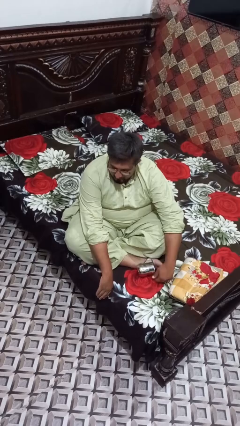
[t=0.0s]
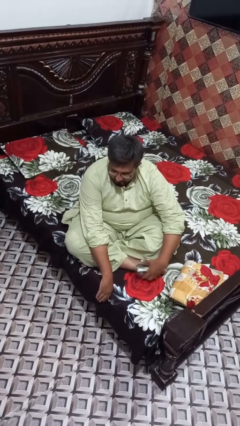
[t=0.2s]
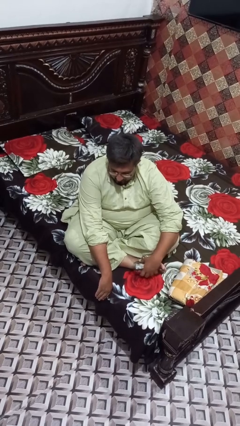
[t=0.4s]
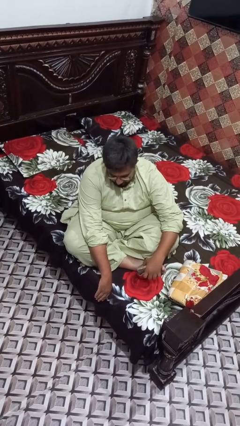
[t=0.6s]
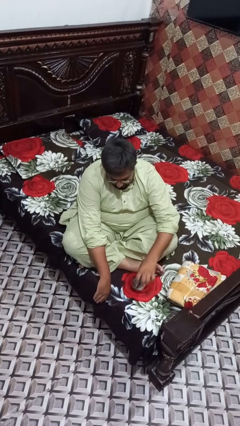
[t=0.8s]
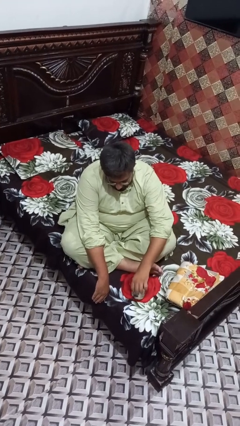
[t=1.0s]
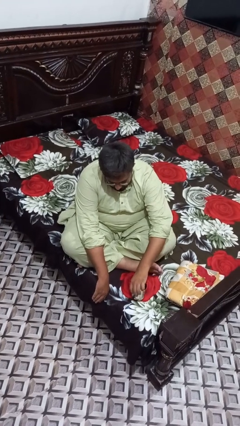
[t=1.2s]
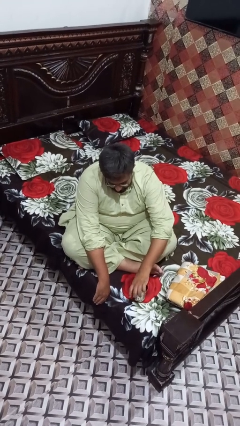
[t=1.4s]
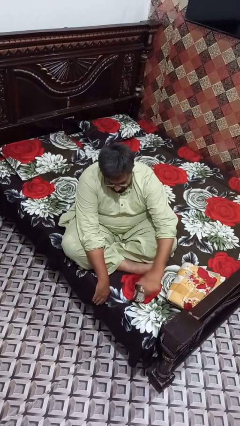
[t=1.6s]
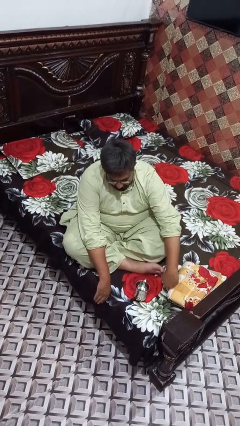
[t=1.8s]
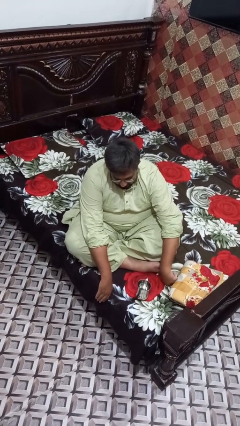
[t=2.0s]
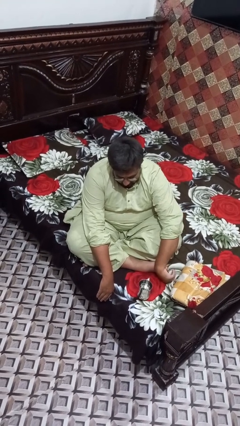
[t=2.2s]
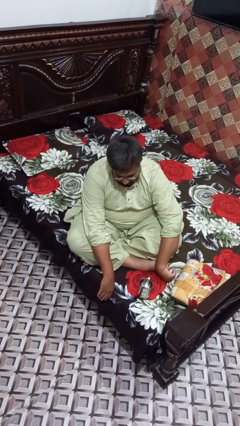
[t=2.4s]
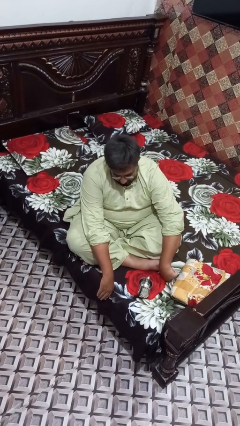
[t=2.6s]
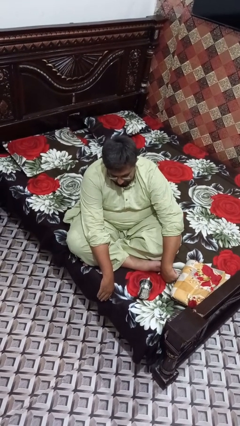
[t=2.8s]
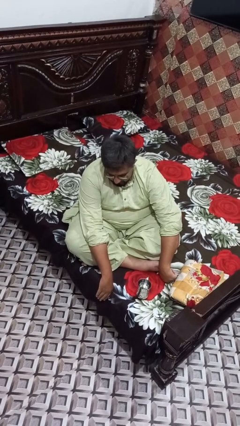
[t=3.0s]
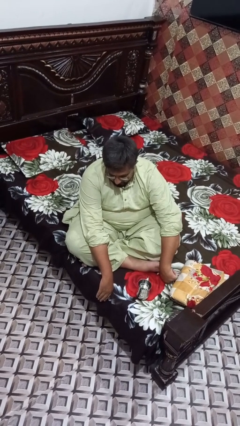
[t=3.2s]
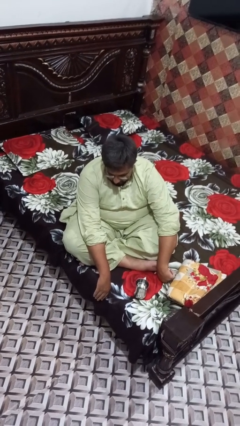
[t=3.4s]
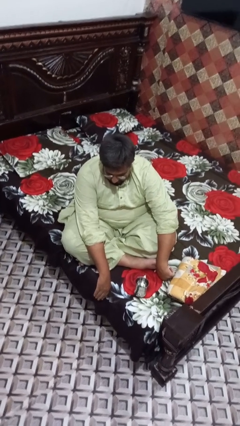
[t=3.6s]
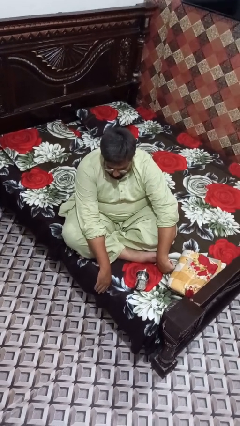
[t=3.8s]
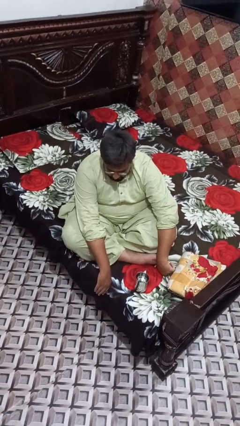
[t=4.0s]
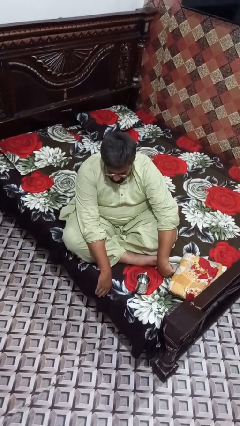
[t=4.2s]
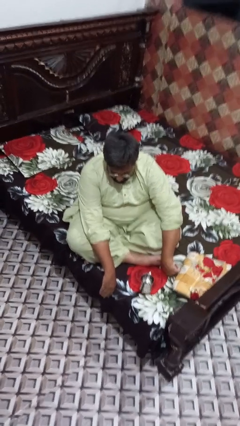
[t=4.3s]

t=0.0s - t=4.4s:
person sets upright glass

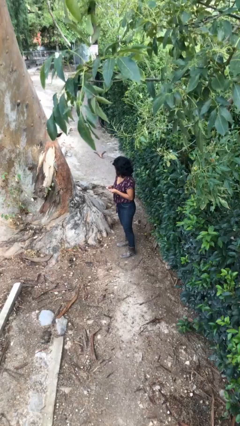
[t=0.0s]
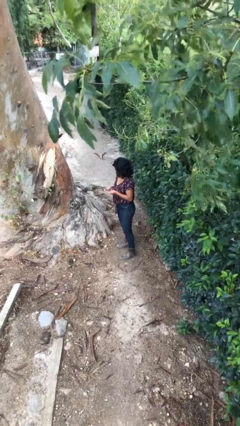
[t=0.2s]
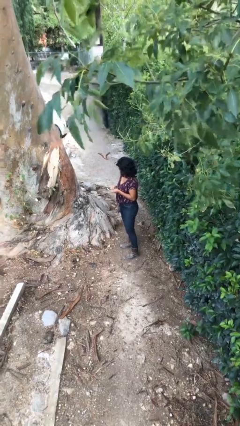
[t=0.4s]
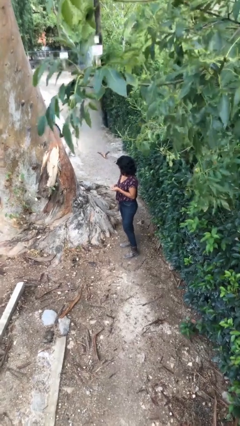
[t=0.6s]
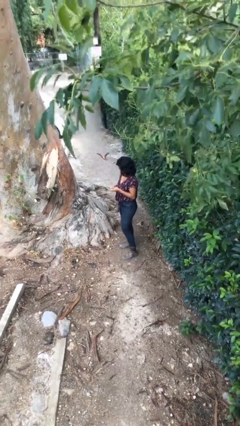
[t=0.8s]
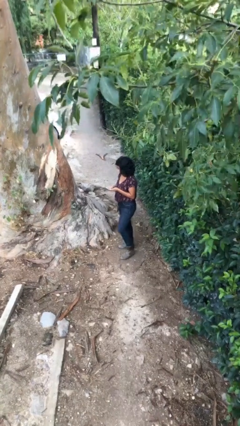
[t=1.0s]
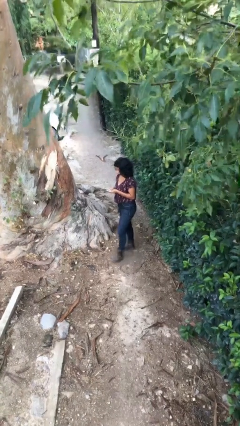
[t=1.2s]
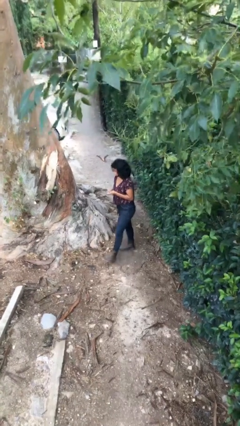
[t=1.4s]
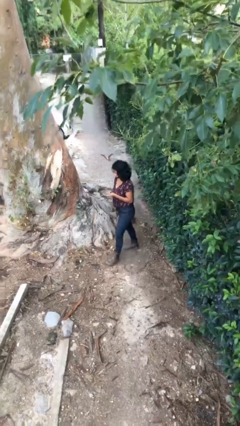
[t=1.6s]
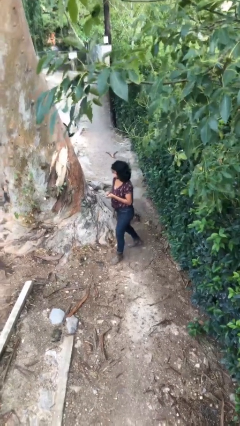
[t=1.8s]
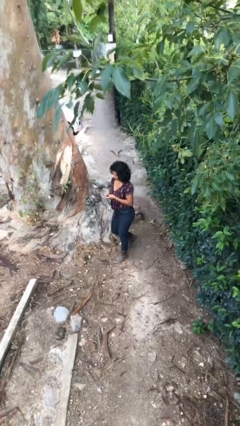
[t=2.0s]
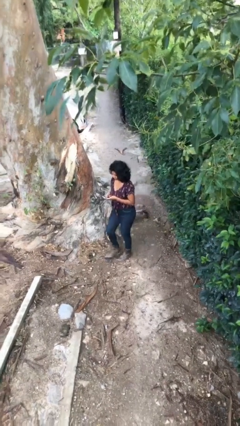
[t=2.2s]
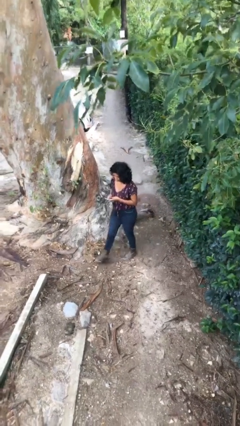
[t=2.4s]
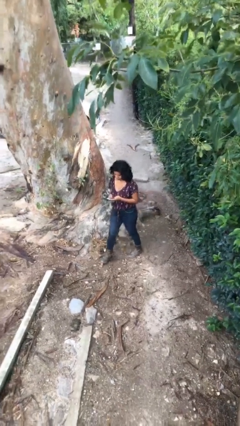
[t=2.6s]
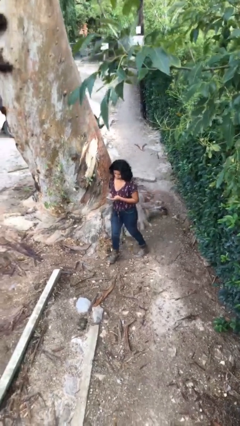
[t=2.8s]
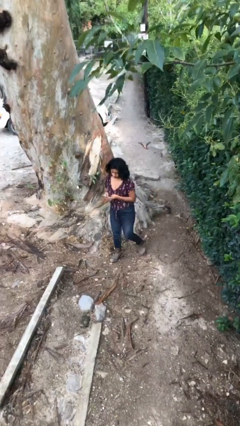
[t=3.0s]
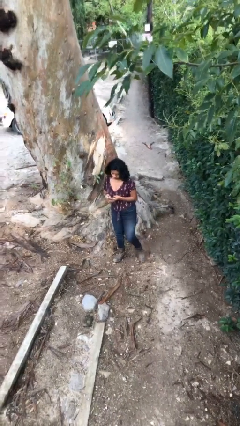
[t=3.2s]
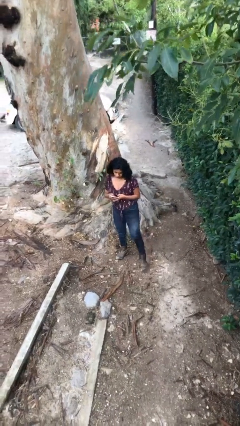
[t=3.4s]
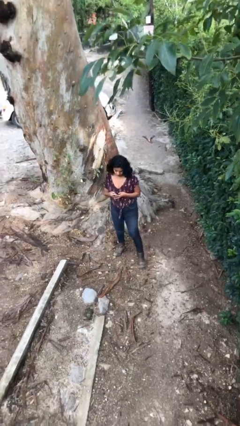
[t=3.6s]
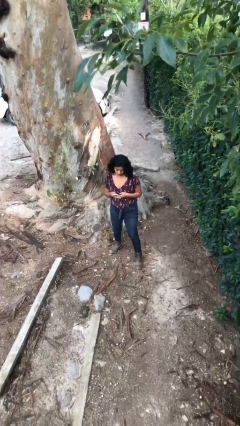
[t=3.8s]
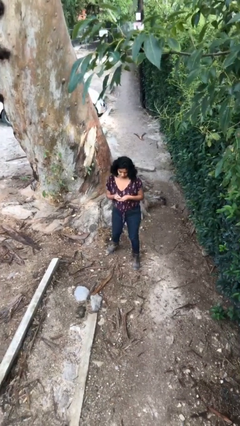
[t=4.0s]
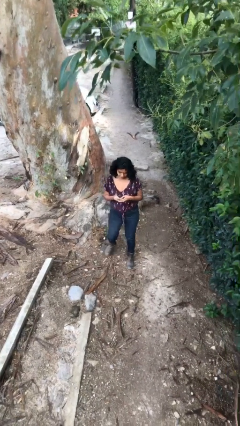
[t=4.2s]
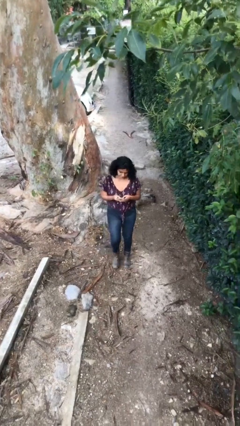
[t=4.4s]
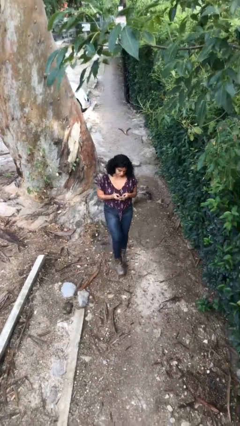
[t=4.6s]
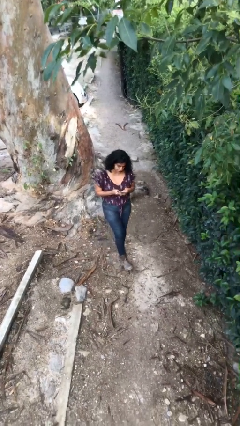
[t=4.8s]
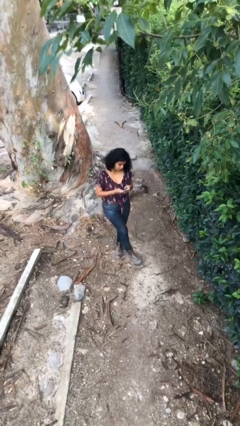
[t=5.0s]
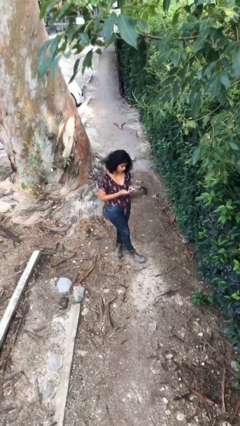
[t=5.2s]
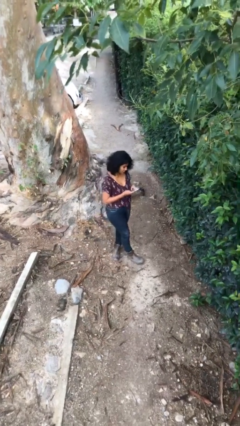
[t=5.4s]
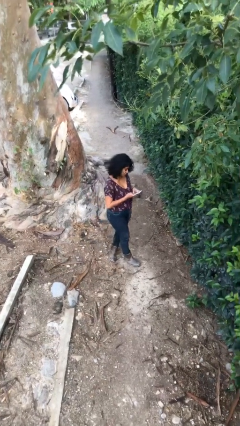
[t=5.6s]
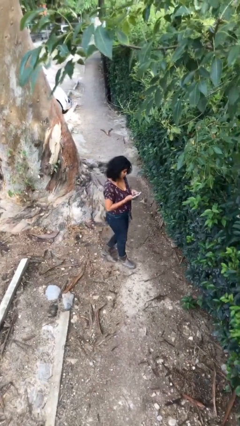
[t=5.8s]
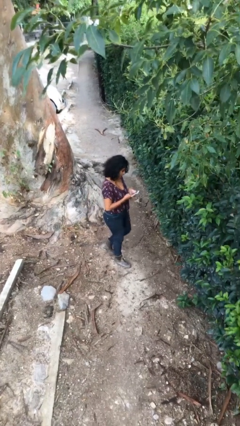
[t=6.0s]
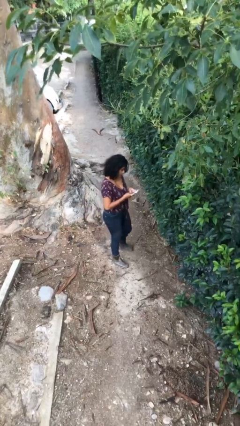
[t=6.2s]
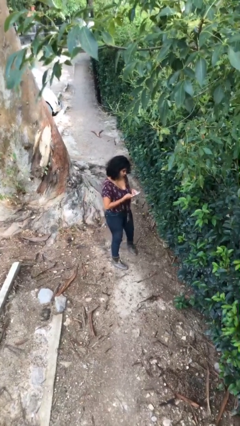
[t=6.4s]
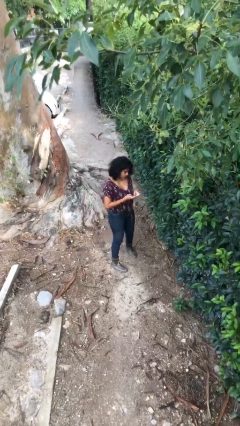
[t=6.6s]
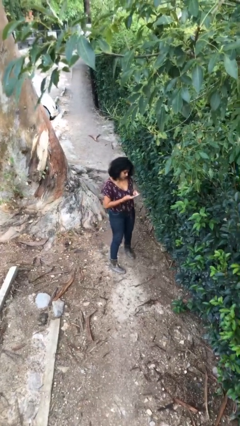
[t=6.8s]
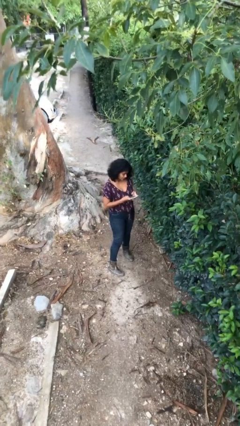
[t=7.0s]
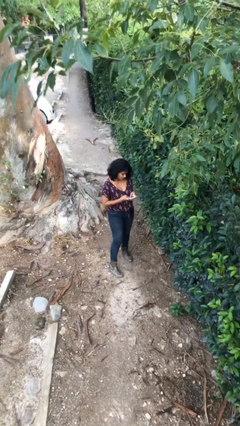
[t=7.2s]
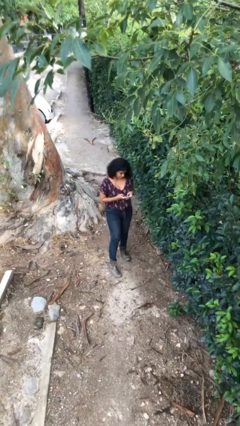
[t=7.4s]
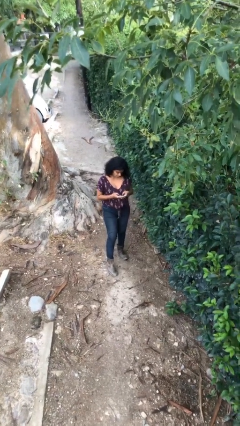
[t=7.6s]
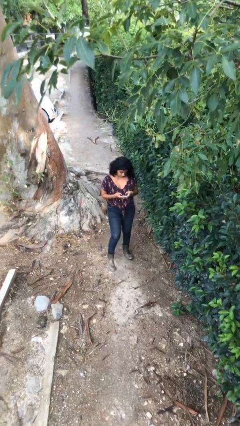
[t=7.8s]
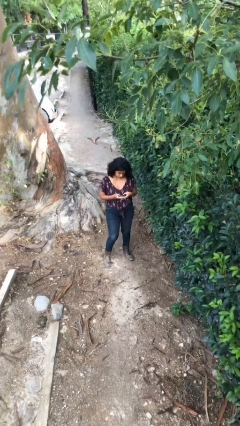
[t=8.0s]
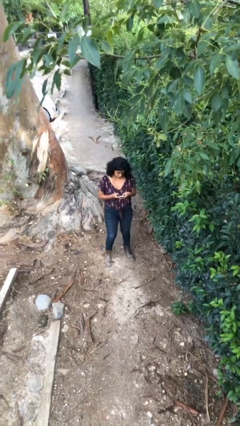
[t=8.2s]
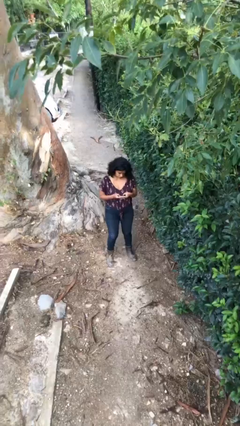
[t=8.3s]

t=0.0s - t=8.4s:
person texts on phone

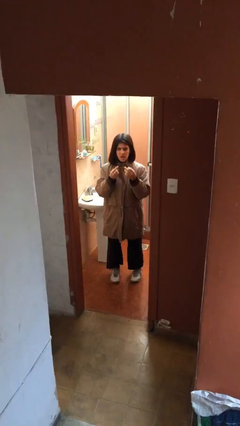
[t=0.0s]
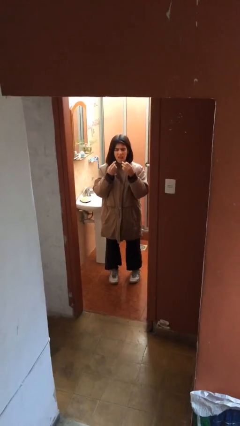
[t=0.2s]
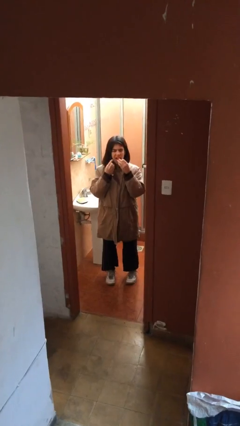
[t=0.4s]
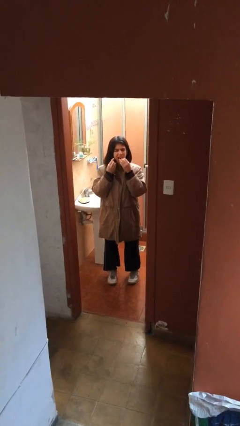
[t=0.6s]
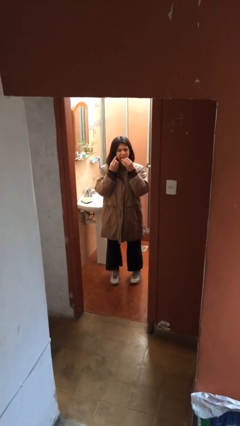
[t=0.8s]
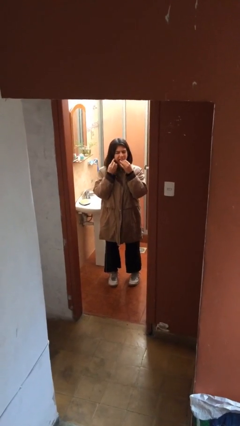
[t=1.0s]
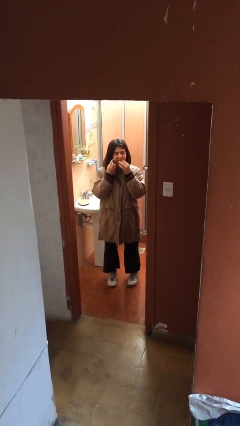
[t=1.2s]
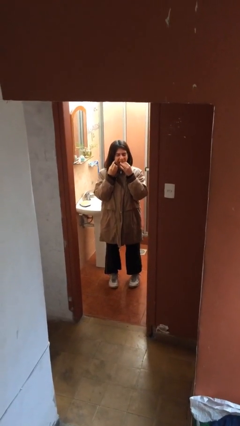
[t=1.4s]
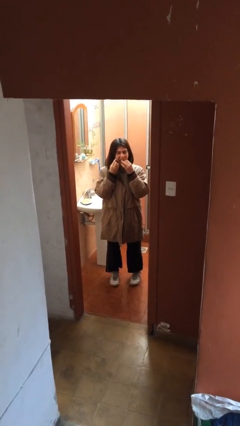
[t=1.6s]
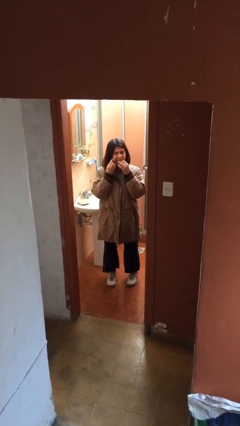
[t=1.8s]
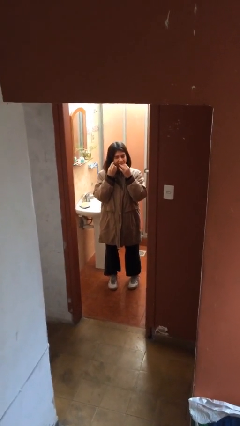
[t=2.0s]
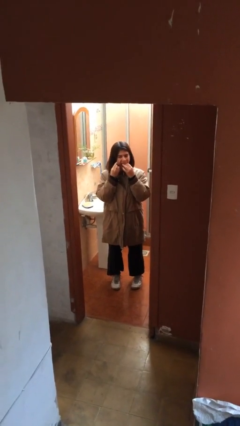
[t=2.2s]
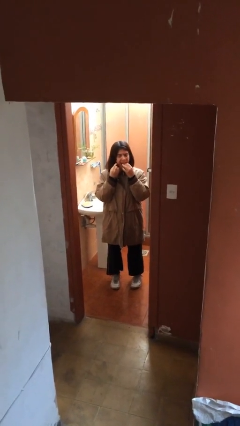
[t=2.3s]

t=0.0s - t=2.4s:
person flosses

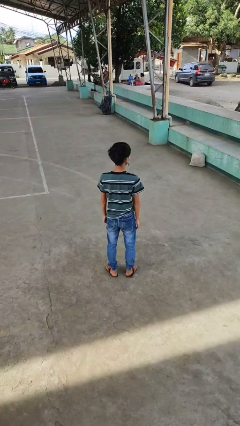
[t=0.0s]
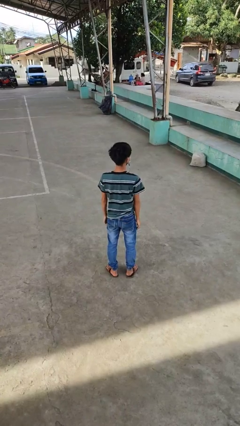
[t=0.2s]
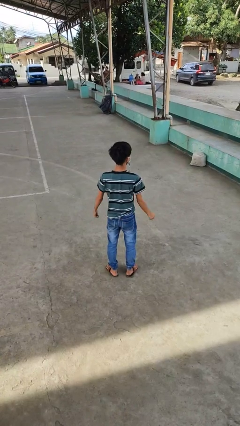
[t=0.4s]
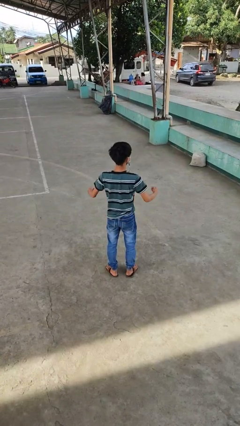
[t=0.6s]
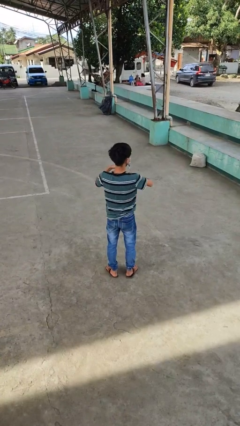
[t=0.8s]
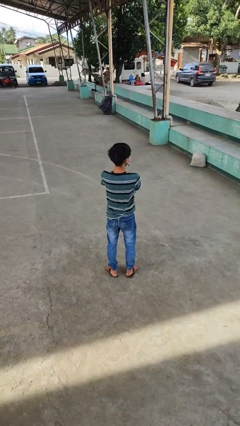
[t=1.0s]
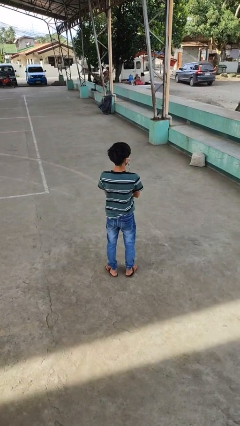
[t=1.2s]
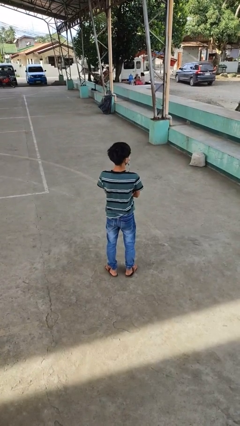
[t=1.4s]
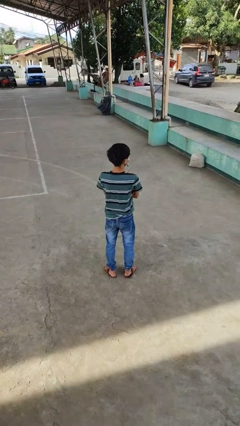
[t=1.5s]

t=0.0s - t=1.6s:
person crosses arms

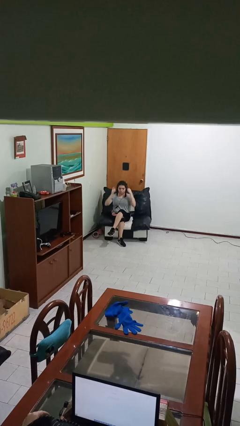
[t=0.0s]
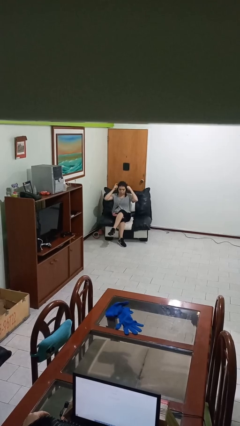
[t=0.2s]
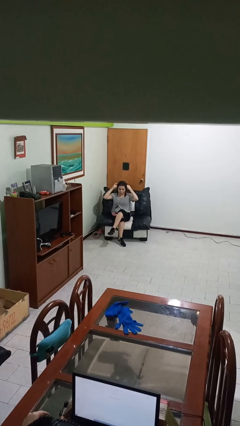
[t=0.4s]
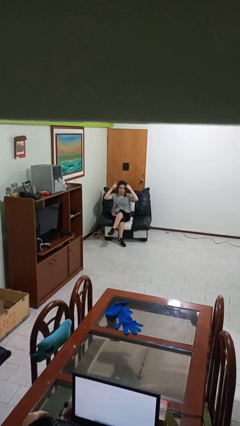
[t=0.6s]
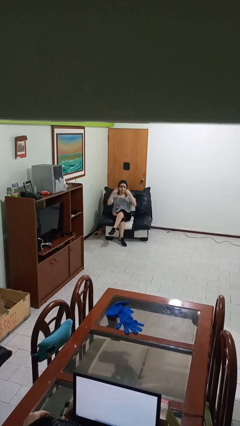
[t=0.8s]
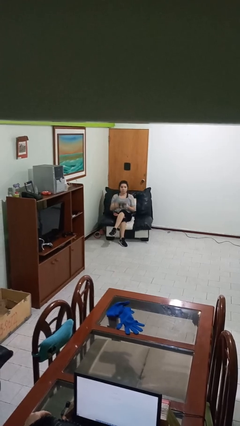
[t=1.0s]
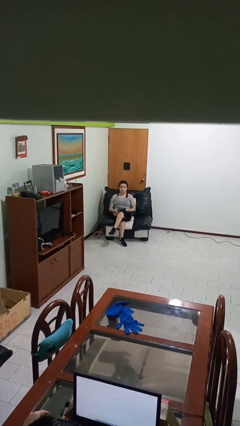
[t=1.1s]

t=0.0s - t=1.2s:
person takes off headphones
